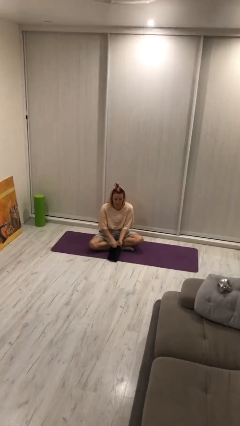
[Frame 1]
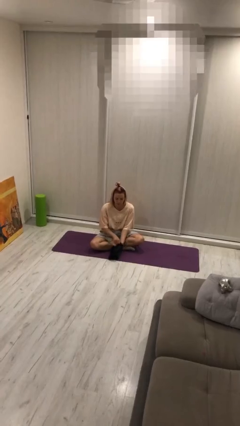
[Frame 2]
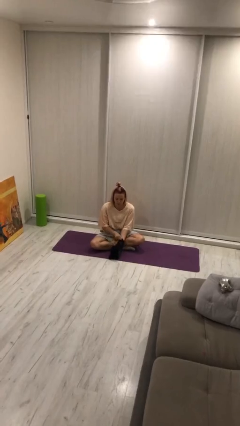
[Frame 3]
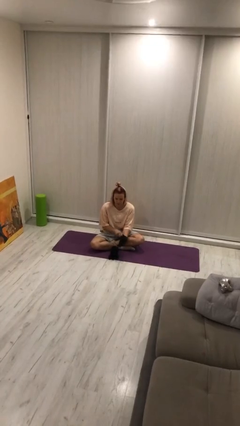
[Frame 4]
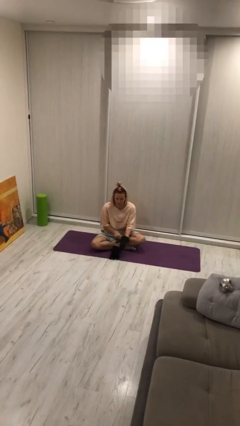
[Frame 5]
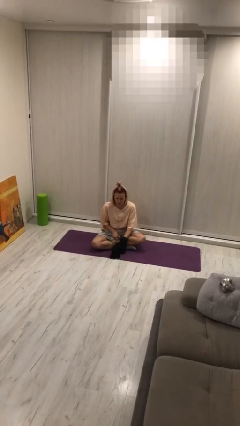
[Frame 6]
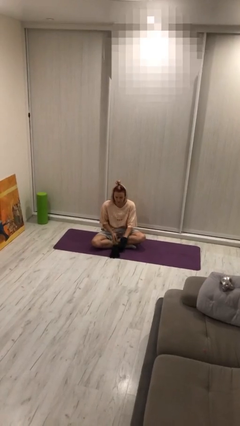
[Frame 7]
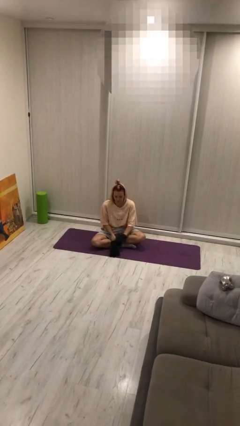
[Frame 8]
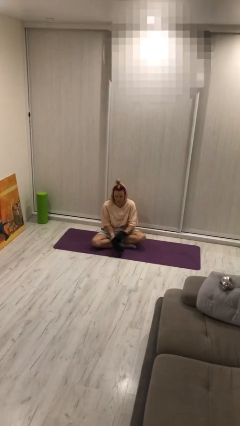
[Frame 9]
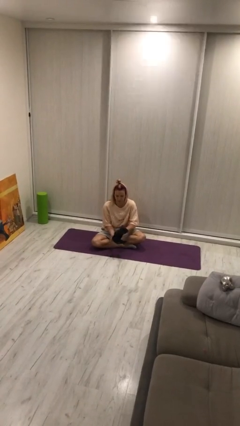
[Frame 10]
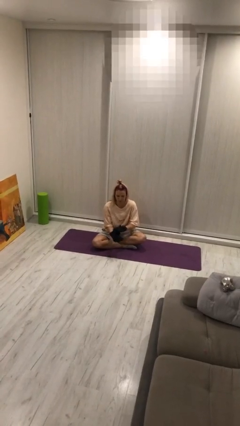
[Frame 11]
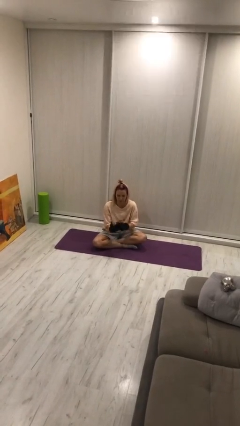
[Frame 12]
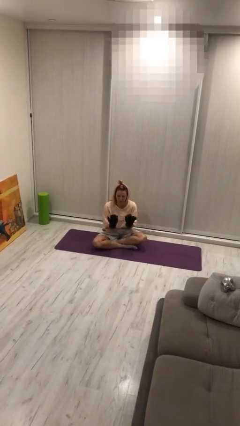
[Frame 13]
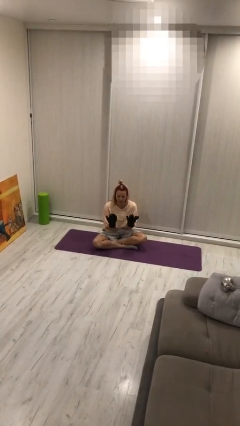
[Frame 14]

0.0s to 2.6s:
person puts on gloves

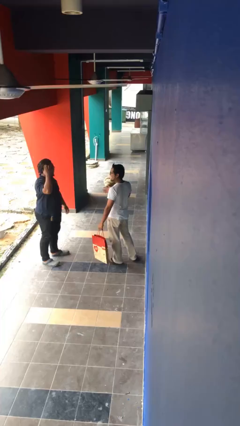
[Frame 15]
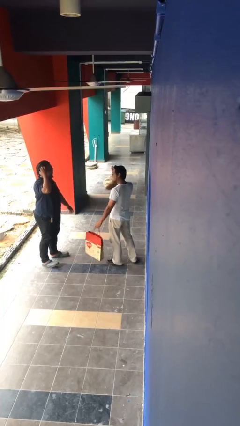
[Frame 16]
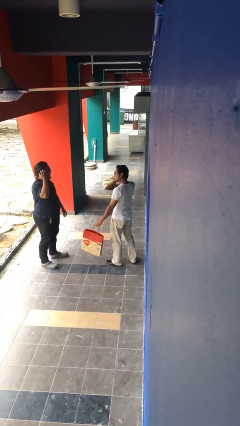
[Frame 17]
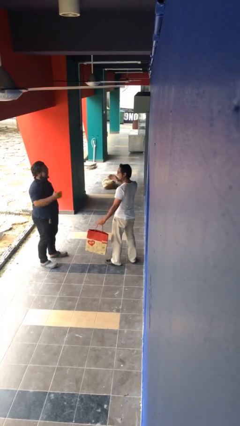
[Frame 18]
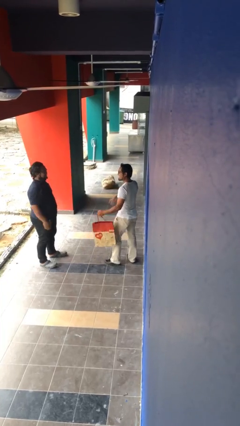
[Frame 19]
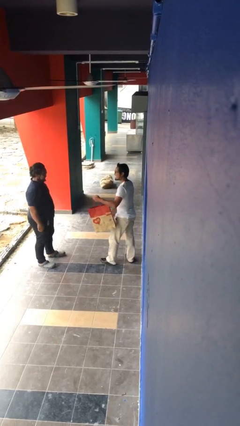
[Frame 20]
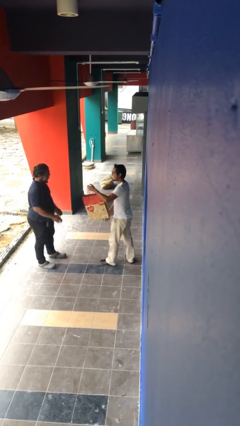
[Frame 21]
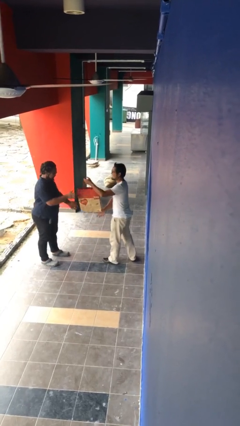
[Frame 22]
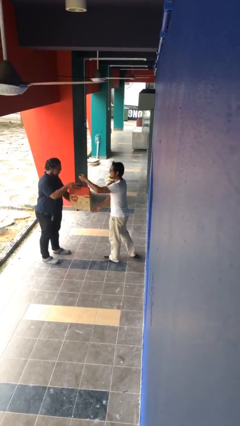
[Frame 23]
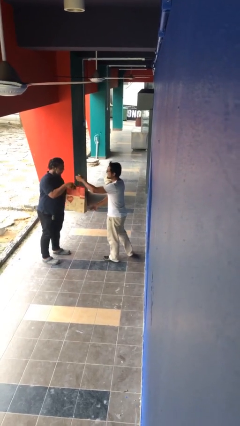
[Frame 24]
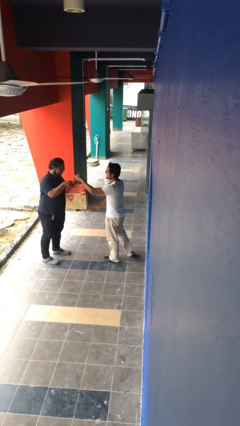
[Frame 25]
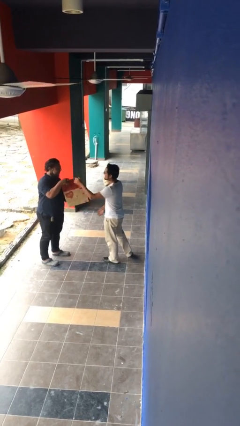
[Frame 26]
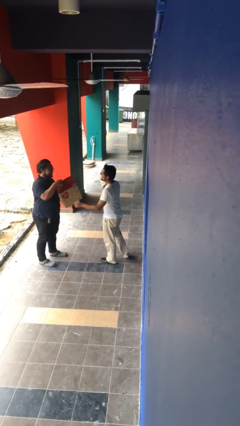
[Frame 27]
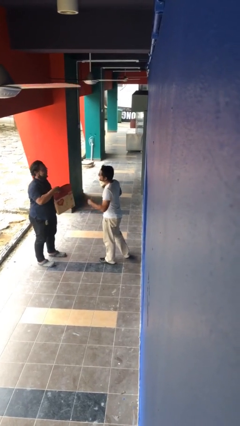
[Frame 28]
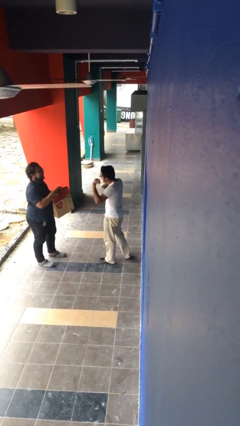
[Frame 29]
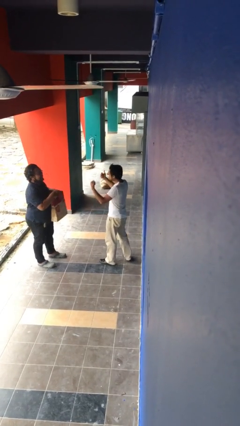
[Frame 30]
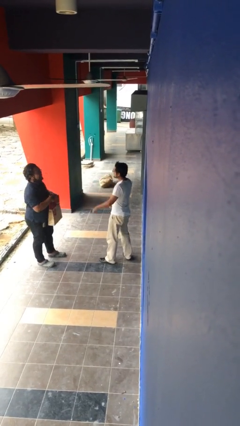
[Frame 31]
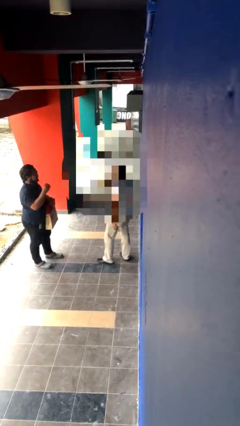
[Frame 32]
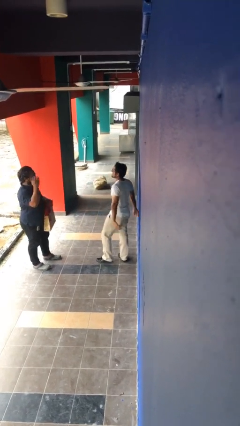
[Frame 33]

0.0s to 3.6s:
person transfers object to person

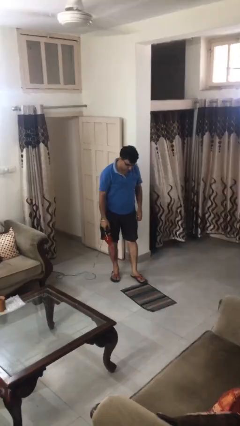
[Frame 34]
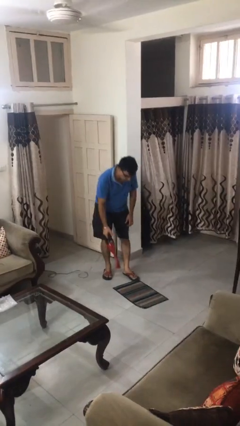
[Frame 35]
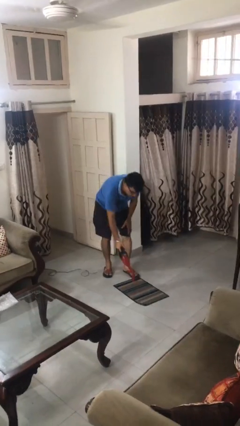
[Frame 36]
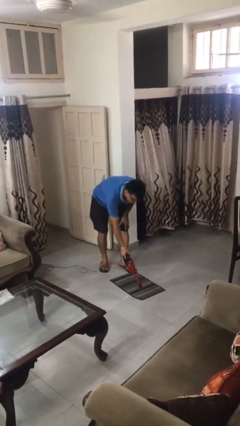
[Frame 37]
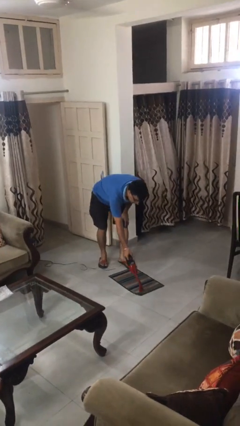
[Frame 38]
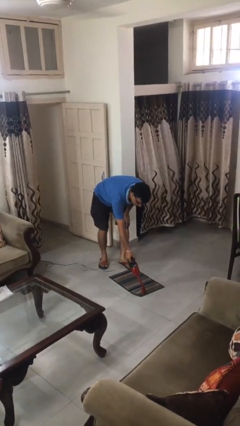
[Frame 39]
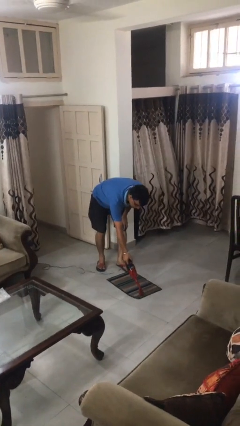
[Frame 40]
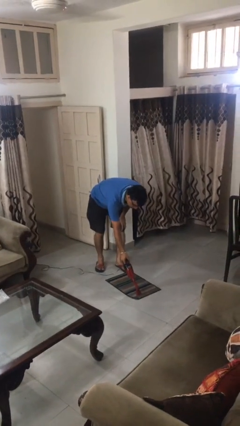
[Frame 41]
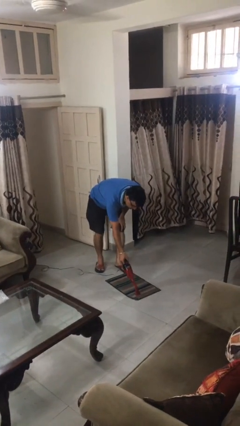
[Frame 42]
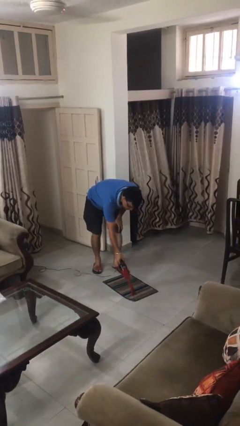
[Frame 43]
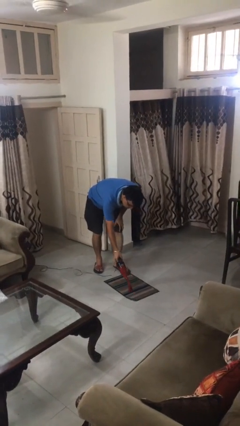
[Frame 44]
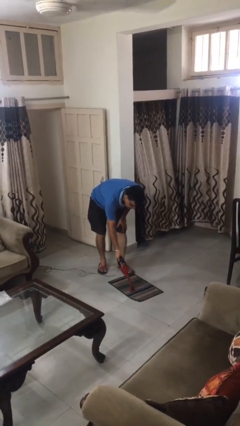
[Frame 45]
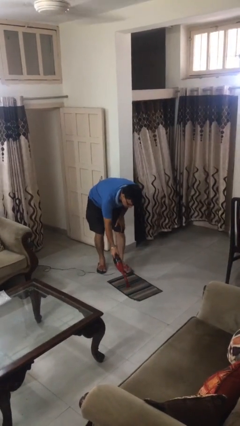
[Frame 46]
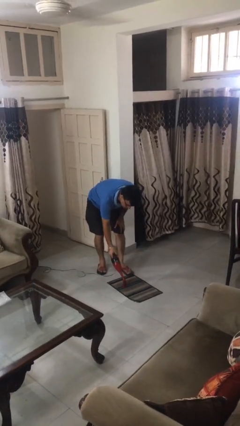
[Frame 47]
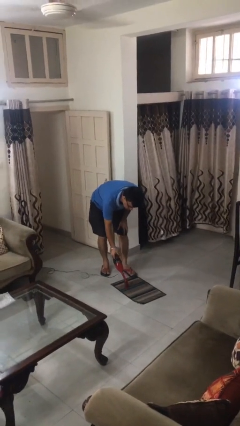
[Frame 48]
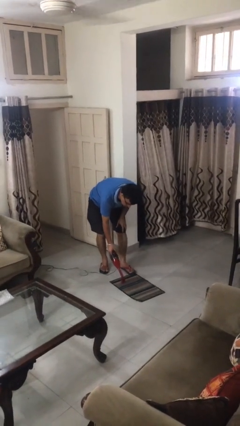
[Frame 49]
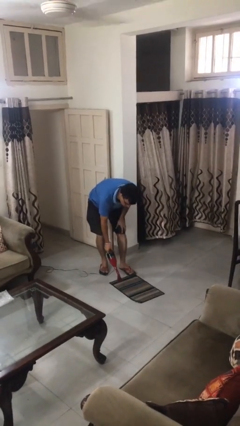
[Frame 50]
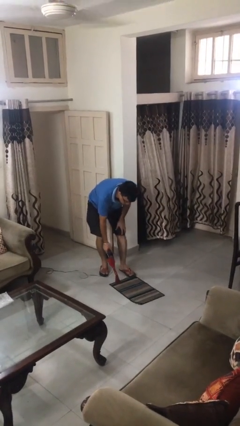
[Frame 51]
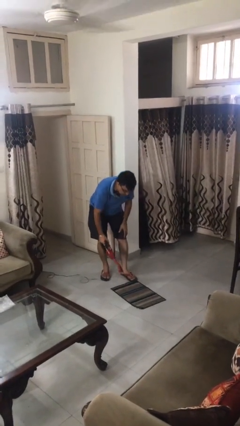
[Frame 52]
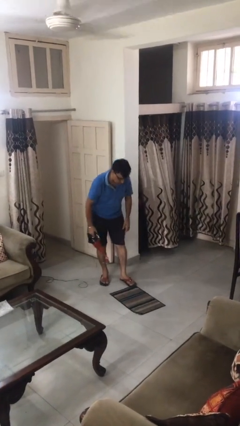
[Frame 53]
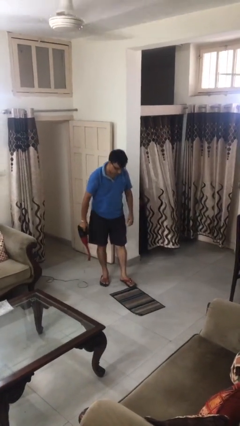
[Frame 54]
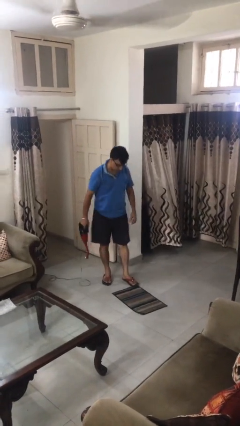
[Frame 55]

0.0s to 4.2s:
person vacuums carpet

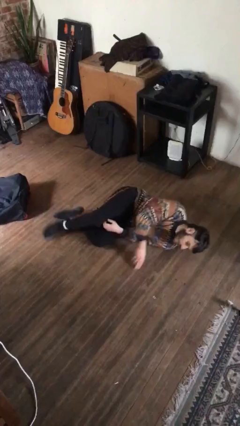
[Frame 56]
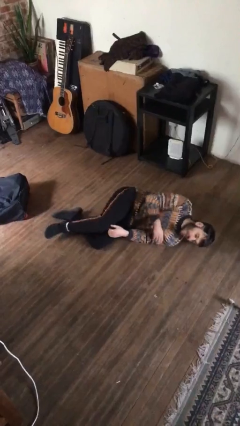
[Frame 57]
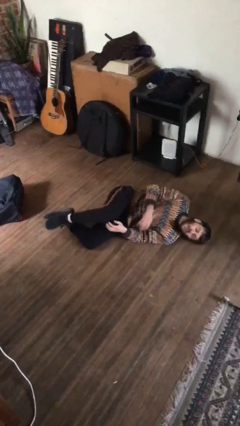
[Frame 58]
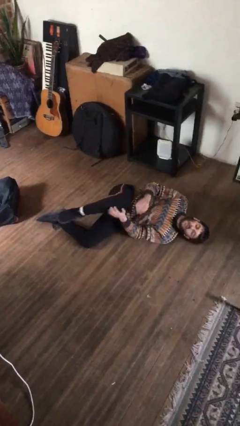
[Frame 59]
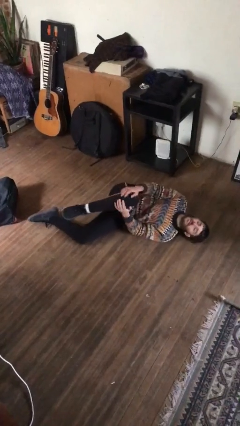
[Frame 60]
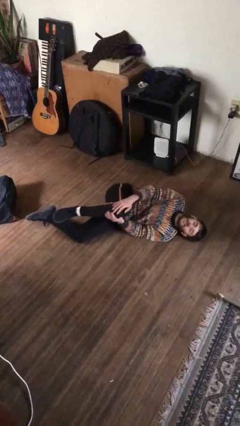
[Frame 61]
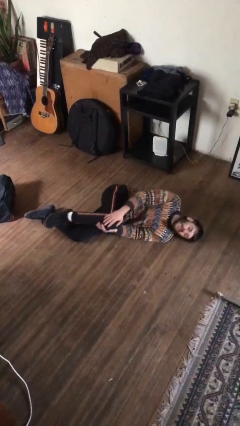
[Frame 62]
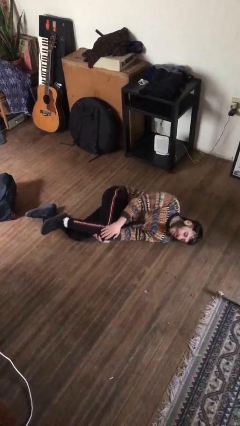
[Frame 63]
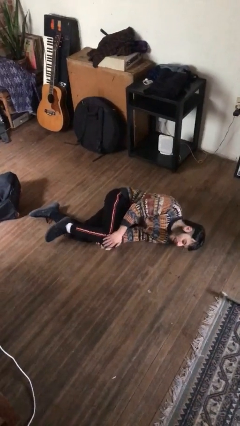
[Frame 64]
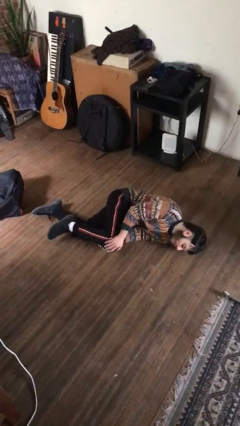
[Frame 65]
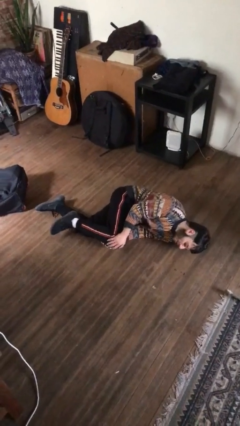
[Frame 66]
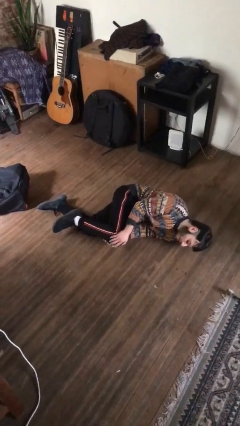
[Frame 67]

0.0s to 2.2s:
person lies down on floor

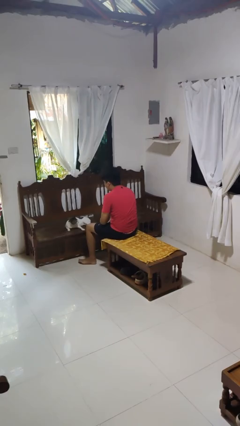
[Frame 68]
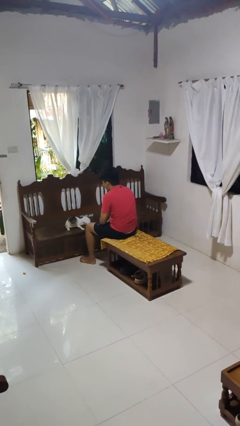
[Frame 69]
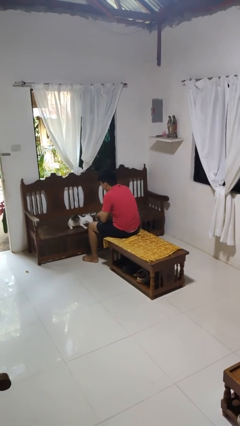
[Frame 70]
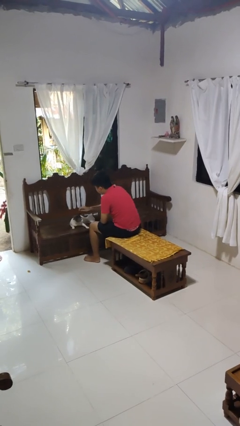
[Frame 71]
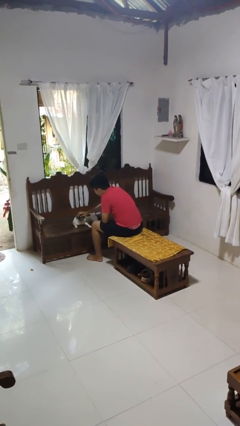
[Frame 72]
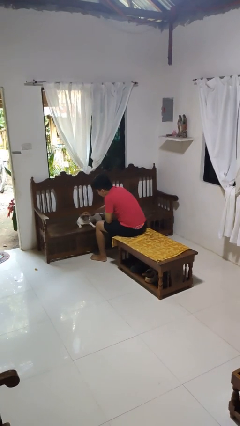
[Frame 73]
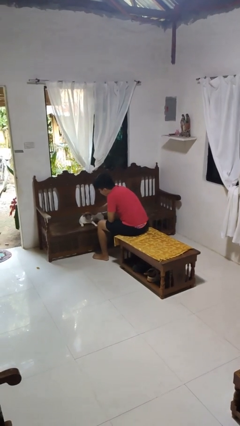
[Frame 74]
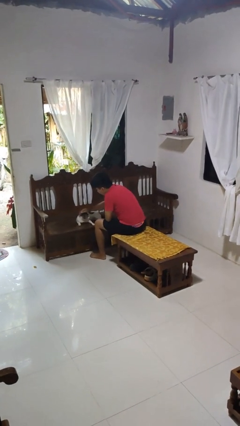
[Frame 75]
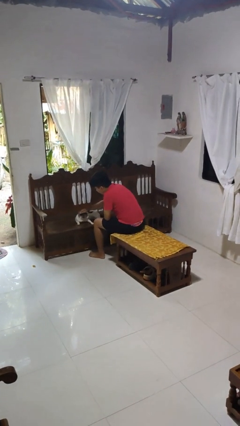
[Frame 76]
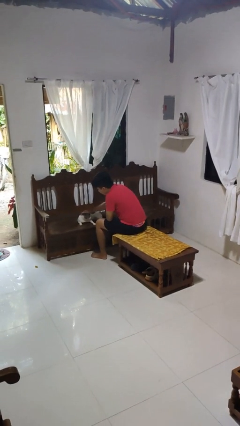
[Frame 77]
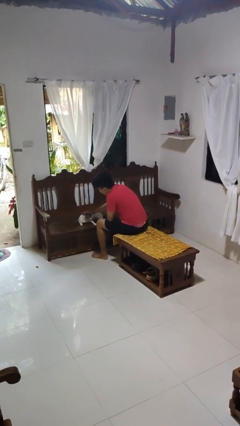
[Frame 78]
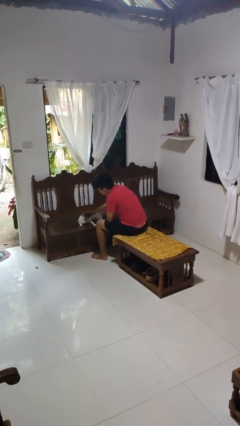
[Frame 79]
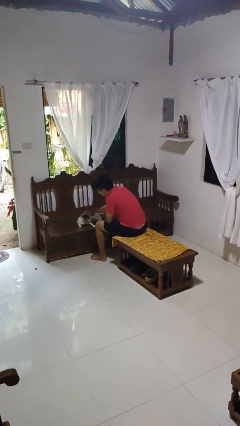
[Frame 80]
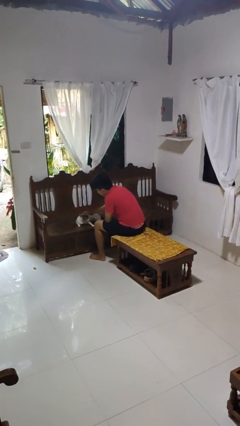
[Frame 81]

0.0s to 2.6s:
person pets cat

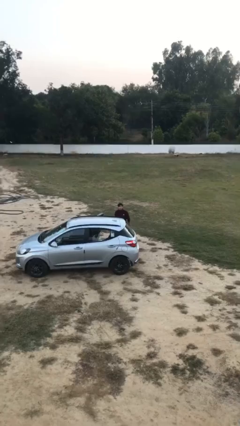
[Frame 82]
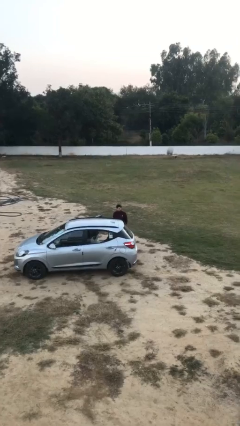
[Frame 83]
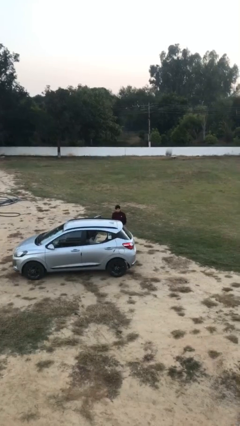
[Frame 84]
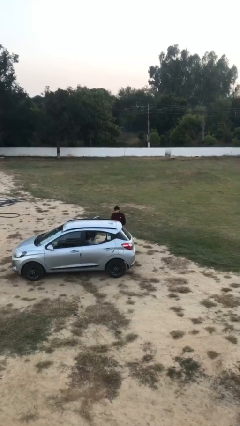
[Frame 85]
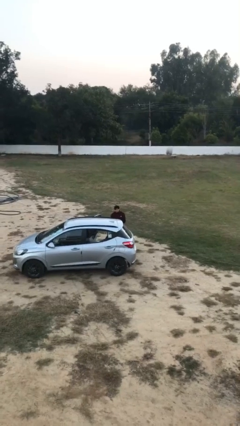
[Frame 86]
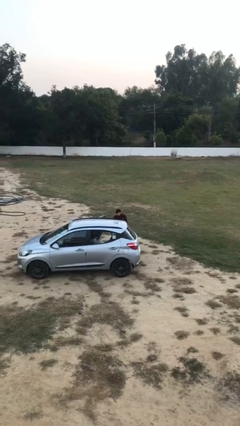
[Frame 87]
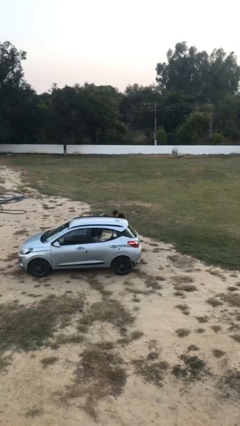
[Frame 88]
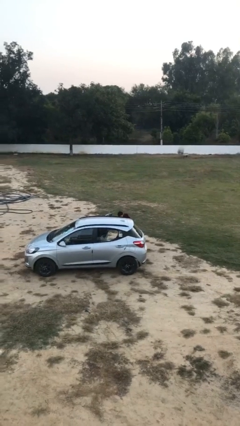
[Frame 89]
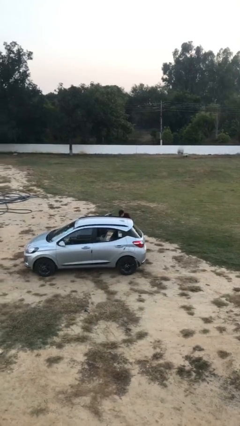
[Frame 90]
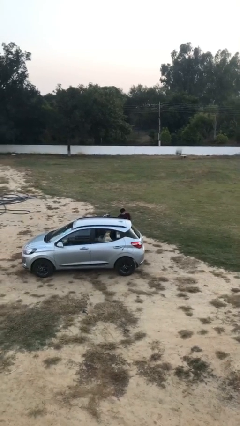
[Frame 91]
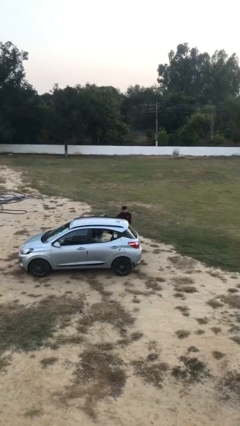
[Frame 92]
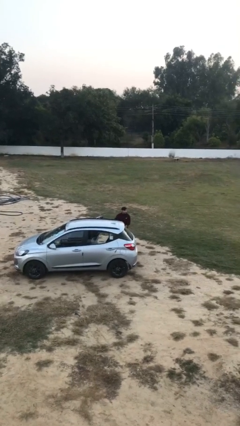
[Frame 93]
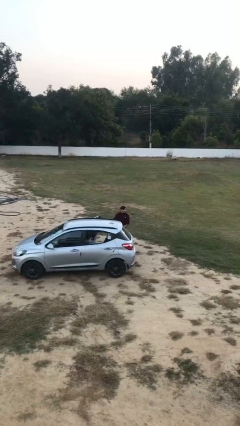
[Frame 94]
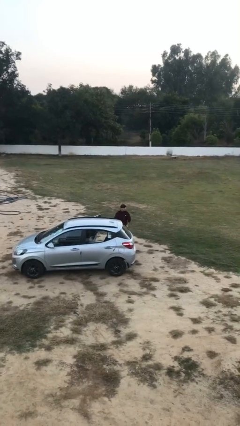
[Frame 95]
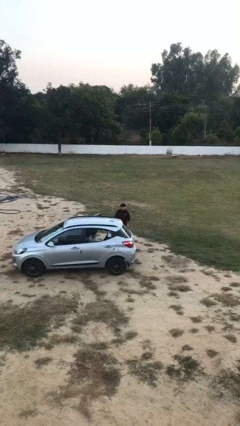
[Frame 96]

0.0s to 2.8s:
person unloads car
